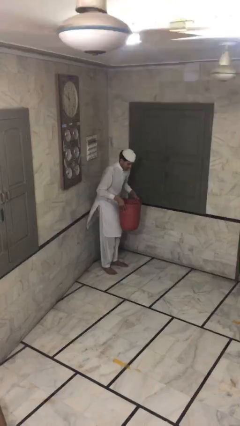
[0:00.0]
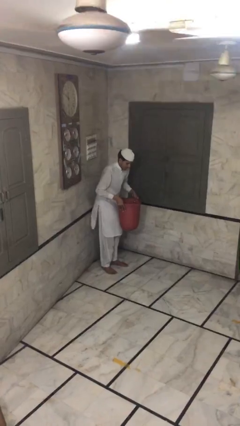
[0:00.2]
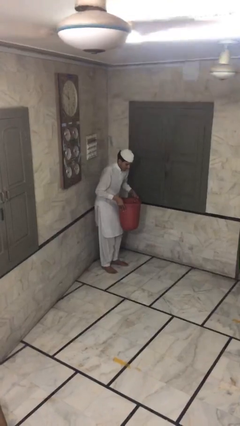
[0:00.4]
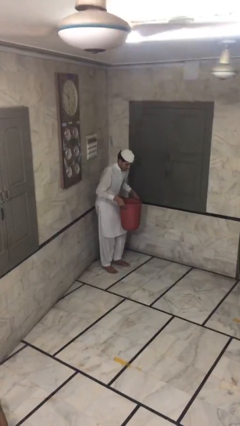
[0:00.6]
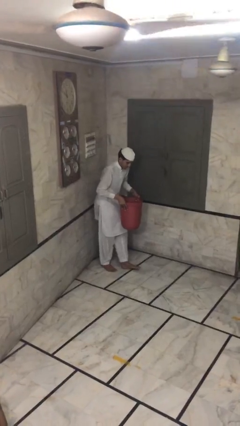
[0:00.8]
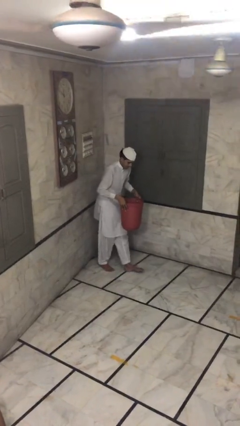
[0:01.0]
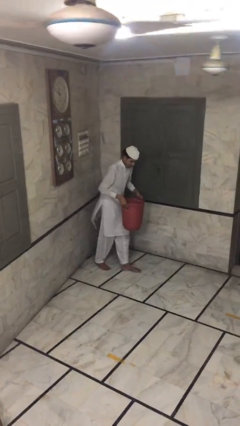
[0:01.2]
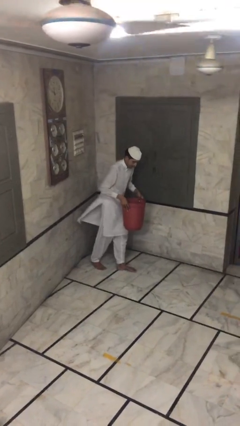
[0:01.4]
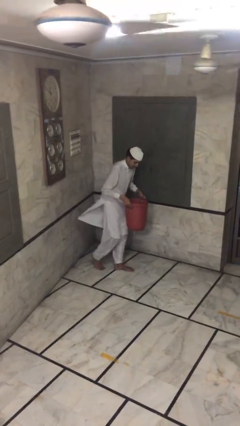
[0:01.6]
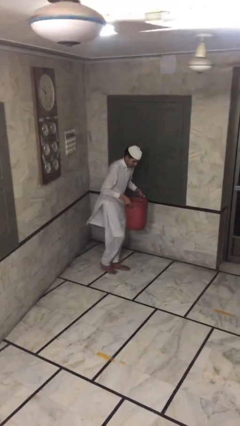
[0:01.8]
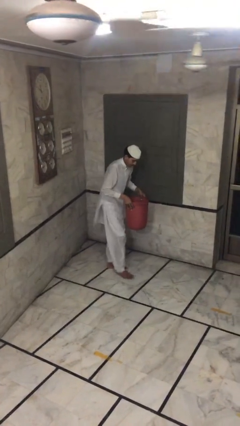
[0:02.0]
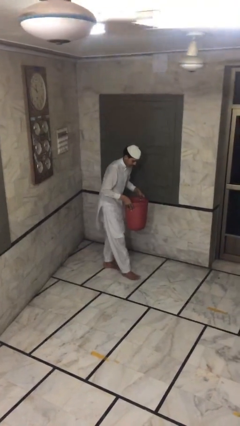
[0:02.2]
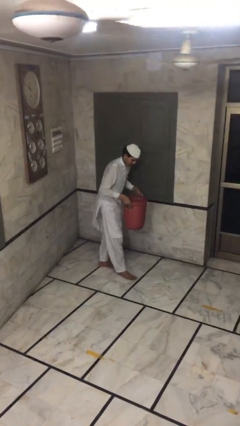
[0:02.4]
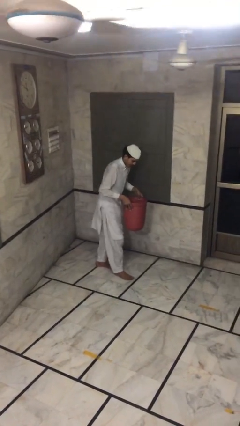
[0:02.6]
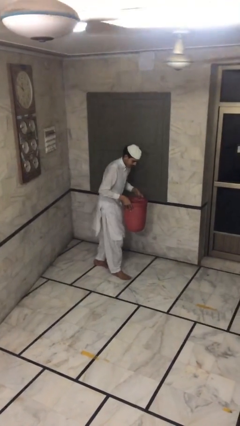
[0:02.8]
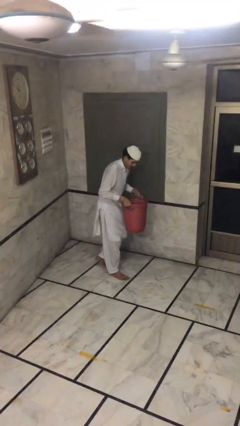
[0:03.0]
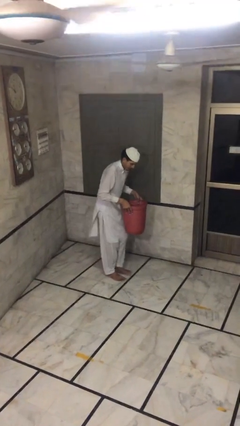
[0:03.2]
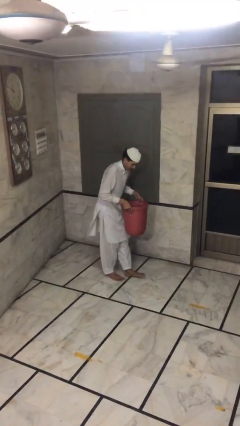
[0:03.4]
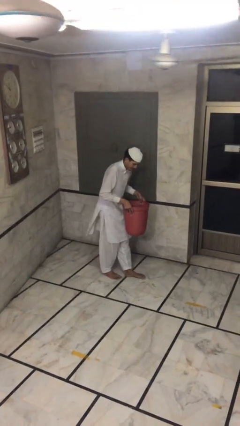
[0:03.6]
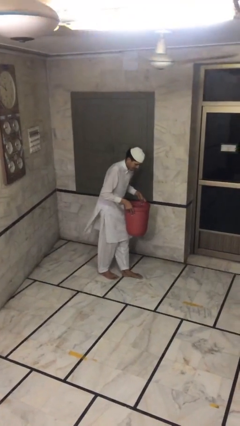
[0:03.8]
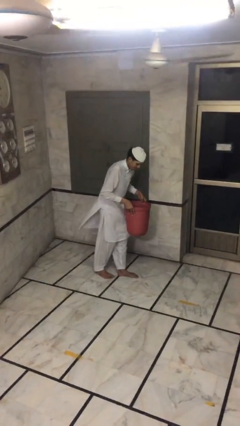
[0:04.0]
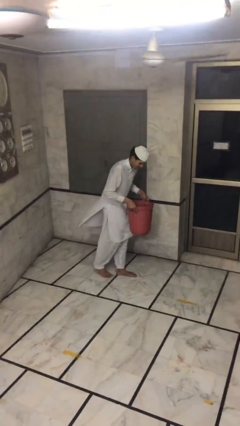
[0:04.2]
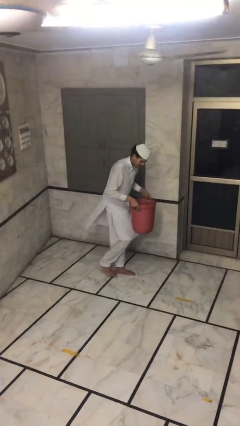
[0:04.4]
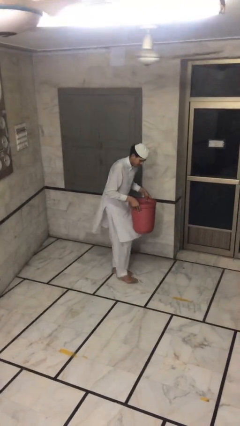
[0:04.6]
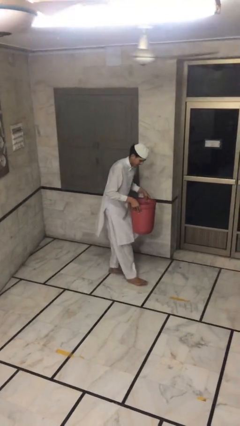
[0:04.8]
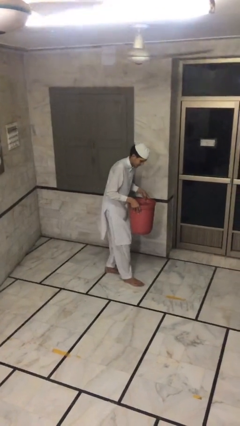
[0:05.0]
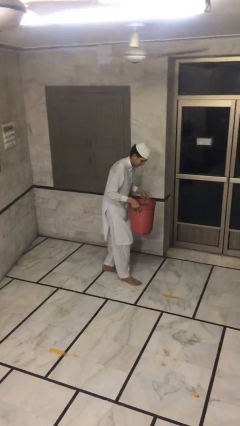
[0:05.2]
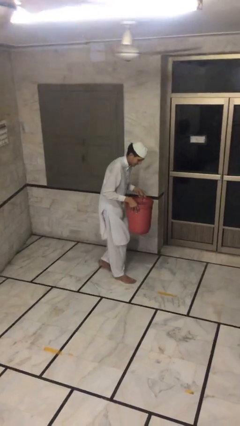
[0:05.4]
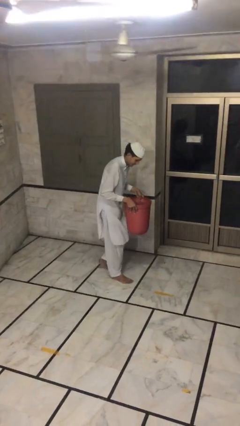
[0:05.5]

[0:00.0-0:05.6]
person carries heavy object

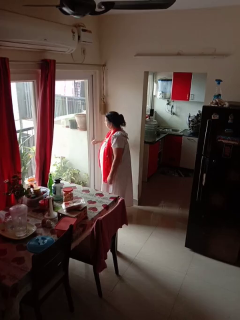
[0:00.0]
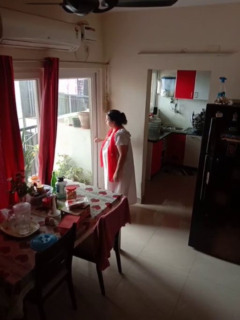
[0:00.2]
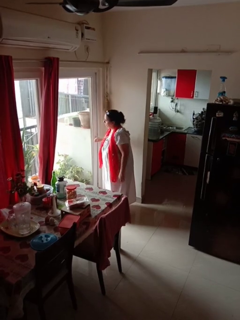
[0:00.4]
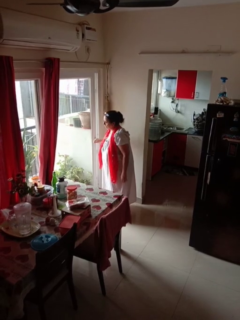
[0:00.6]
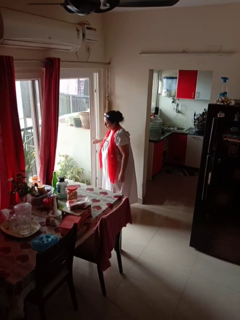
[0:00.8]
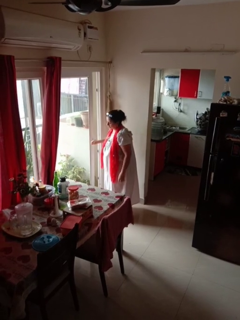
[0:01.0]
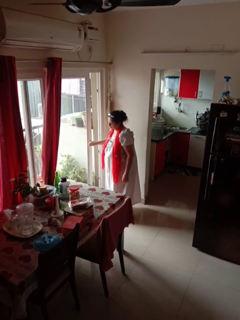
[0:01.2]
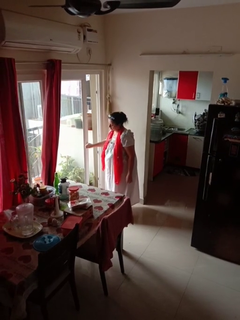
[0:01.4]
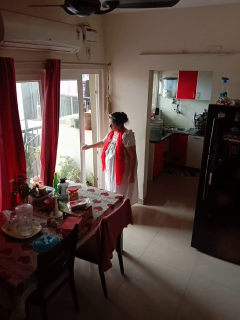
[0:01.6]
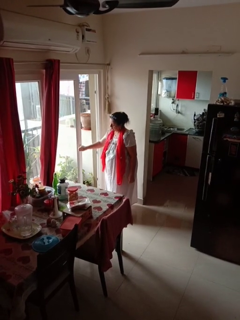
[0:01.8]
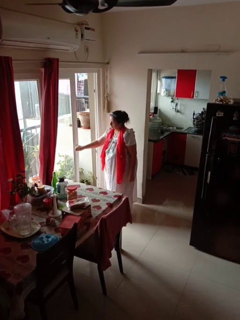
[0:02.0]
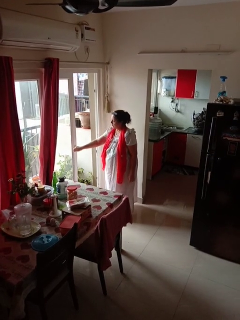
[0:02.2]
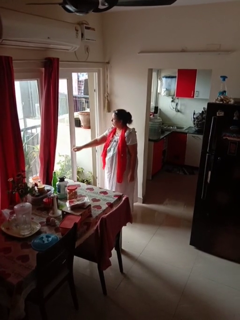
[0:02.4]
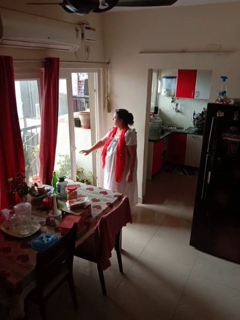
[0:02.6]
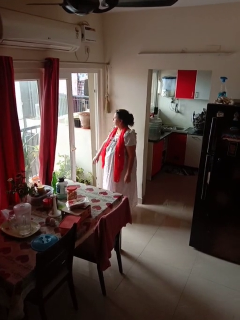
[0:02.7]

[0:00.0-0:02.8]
person opens sliding door

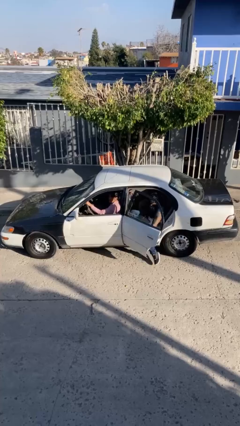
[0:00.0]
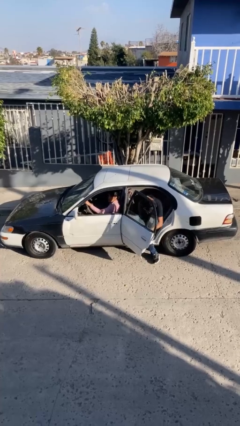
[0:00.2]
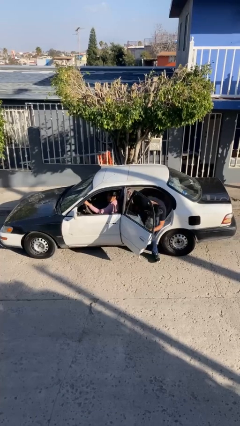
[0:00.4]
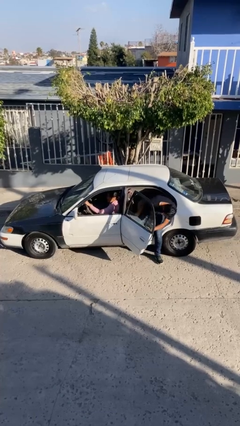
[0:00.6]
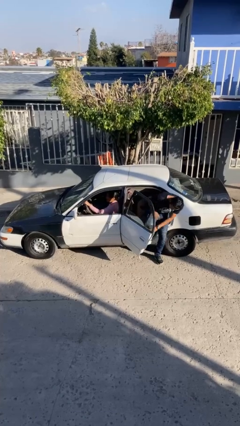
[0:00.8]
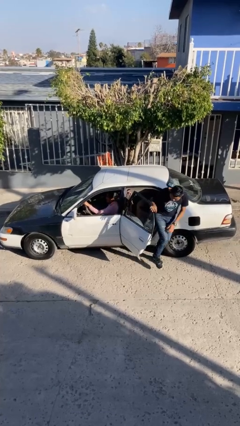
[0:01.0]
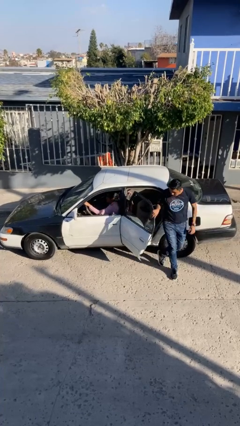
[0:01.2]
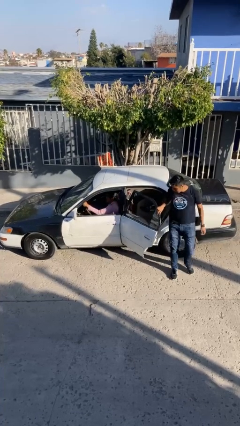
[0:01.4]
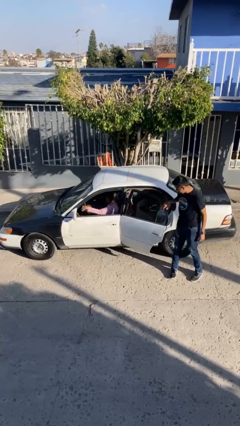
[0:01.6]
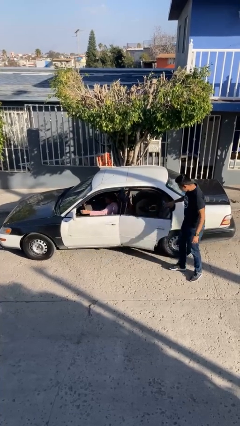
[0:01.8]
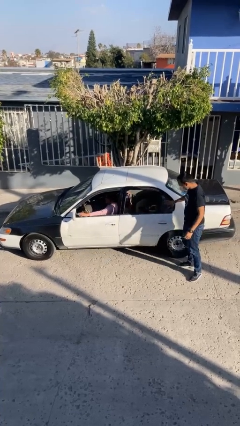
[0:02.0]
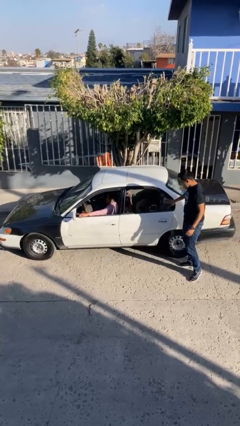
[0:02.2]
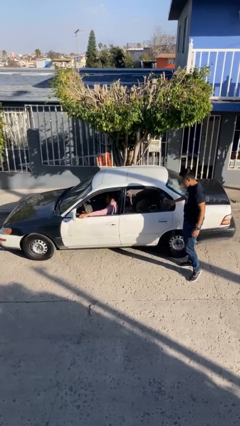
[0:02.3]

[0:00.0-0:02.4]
car drops off person

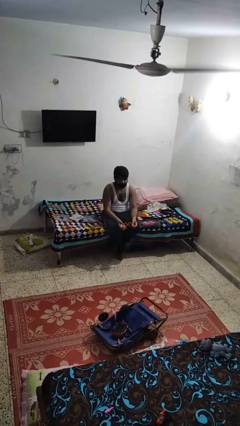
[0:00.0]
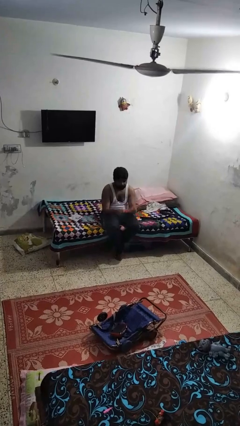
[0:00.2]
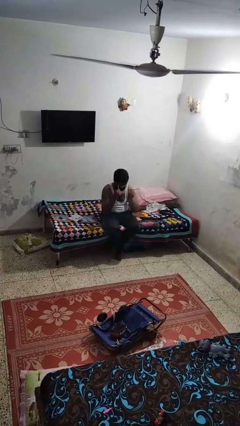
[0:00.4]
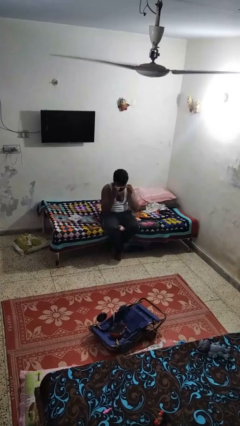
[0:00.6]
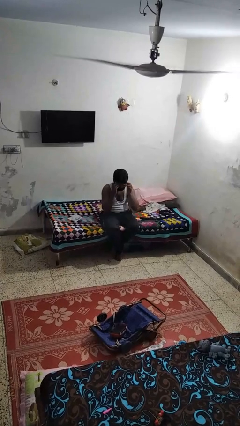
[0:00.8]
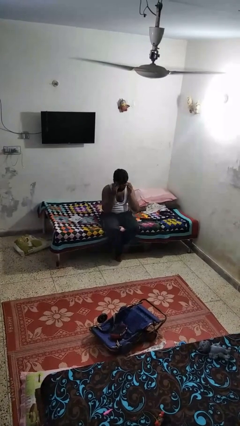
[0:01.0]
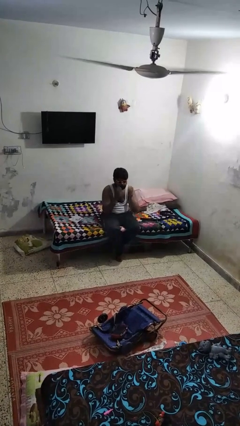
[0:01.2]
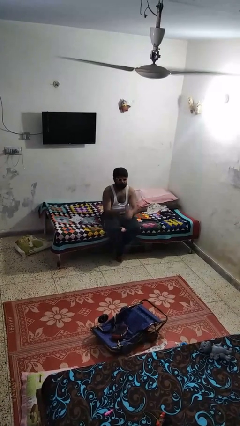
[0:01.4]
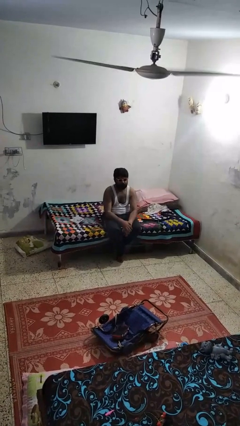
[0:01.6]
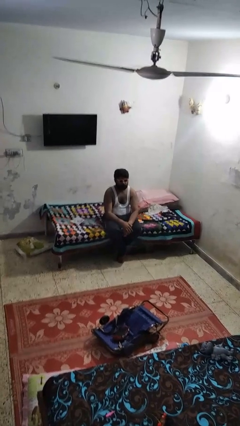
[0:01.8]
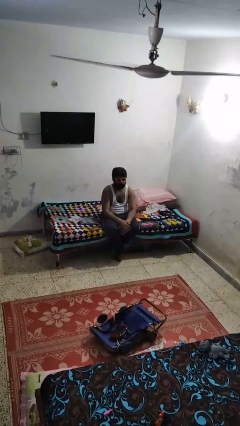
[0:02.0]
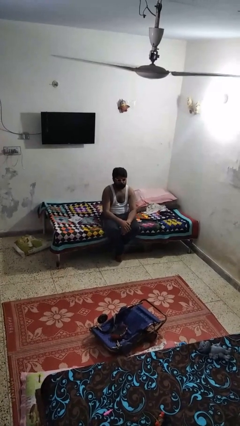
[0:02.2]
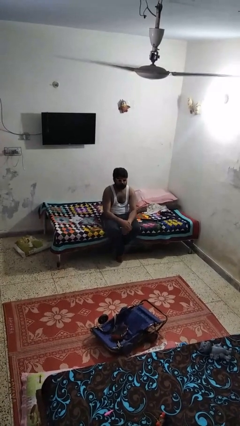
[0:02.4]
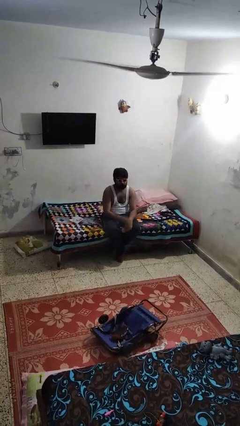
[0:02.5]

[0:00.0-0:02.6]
person puts on sunglasses

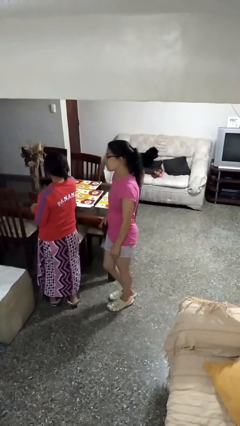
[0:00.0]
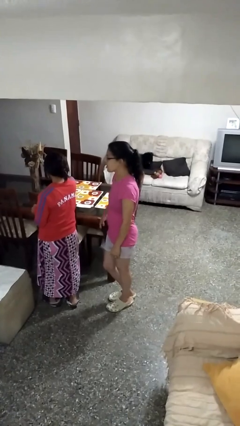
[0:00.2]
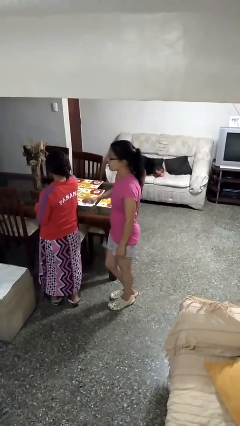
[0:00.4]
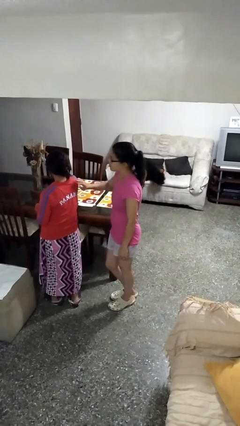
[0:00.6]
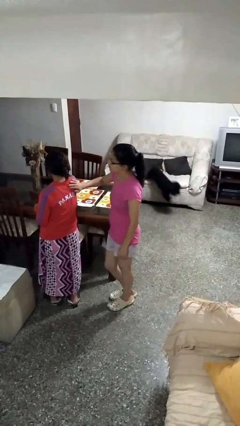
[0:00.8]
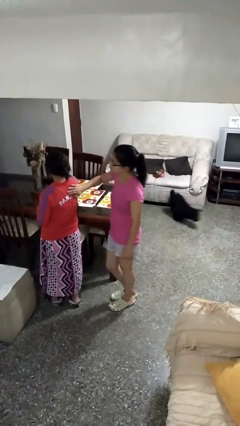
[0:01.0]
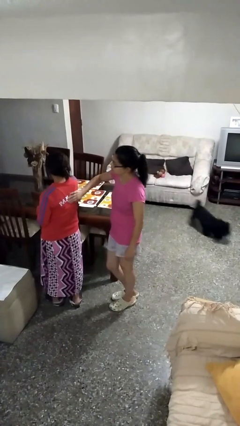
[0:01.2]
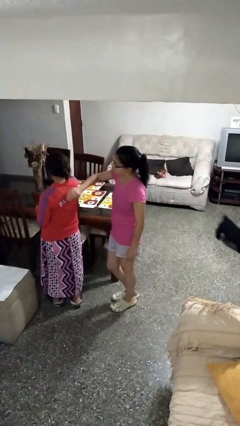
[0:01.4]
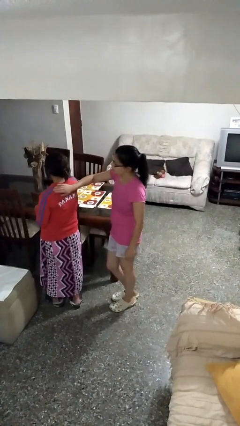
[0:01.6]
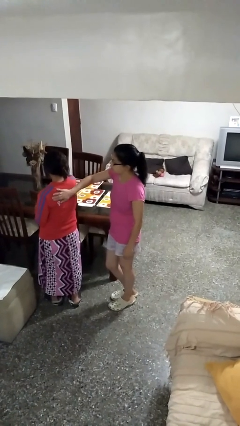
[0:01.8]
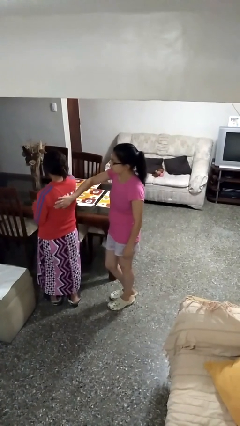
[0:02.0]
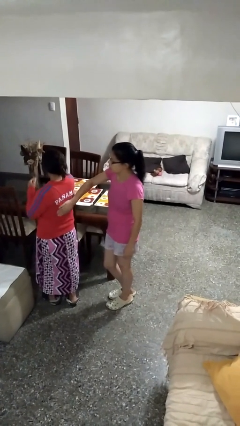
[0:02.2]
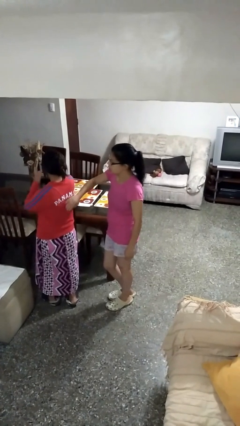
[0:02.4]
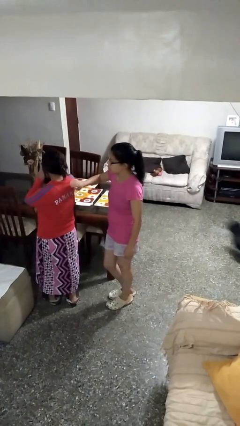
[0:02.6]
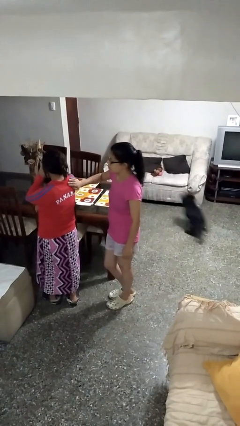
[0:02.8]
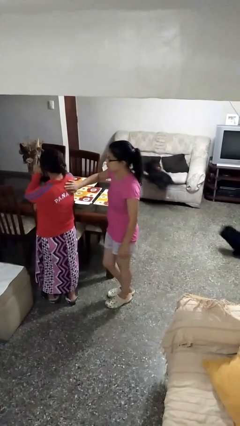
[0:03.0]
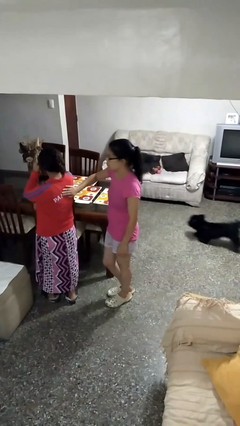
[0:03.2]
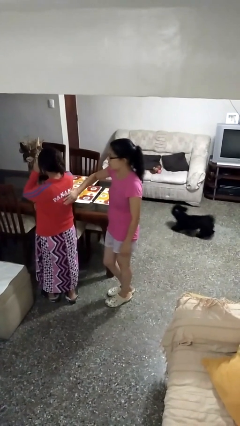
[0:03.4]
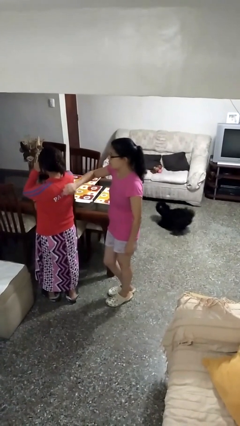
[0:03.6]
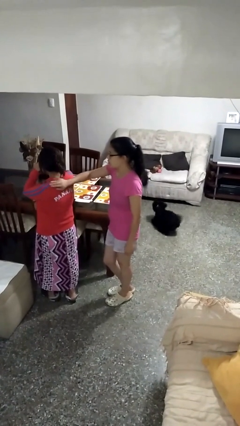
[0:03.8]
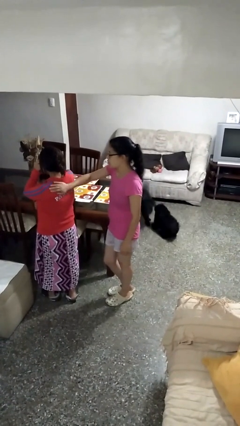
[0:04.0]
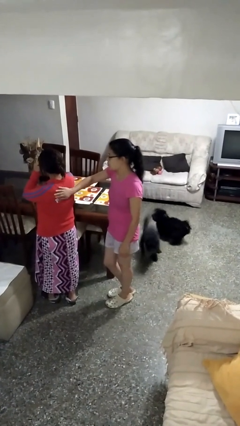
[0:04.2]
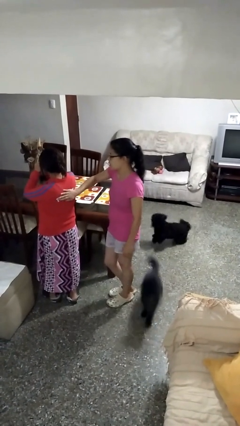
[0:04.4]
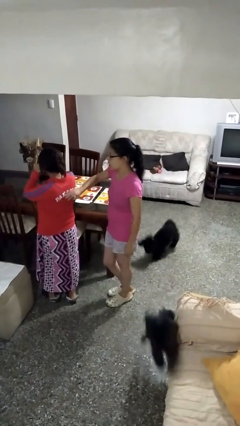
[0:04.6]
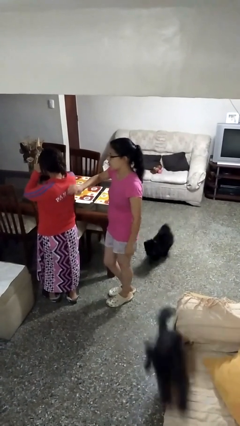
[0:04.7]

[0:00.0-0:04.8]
person touches back of person
